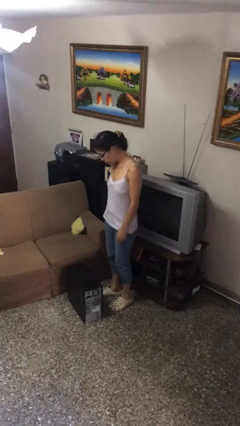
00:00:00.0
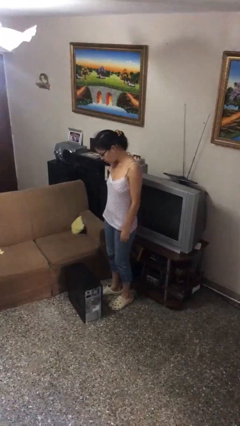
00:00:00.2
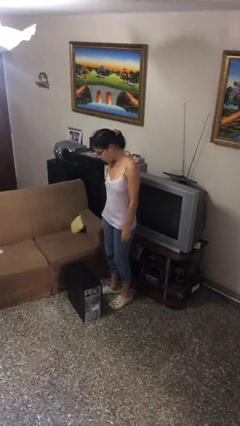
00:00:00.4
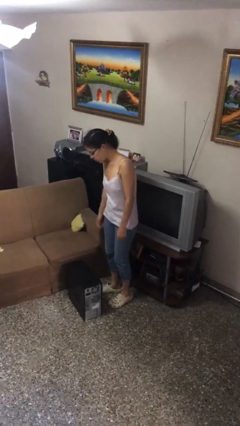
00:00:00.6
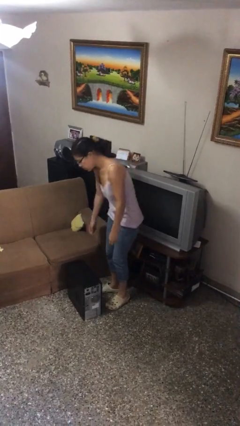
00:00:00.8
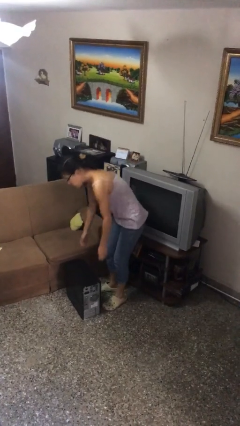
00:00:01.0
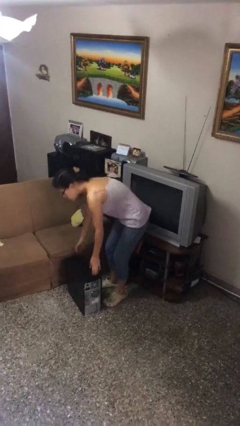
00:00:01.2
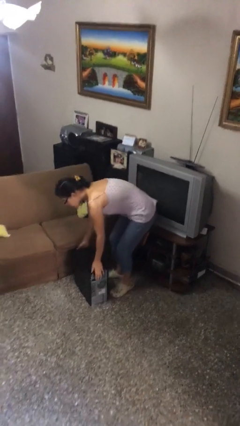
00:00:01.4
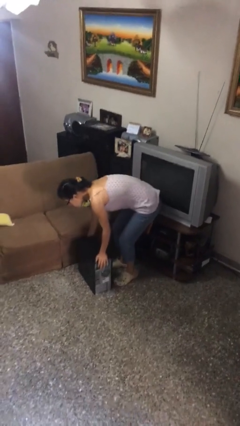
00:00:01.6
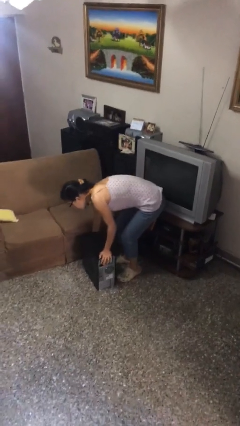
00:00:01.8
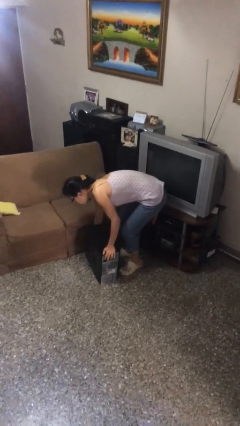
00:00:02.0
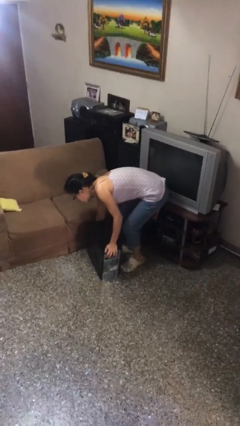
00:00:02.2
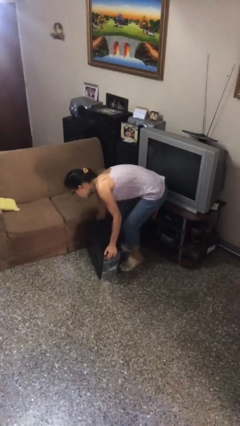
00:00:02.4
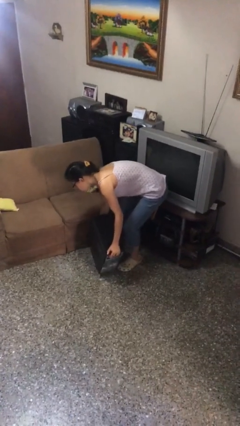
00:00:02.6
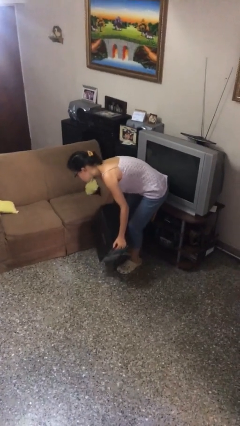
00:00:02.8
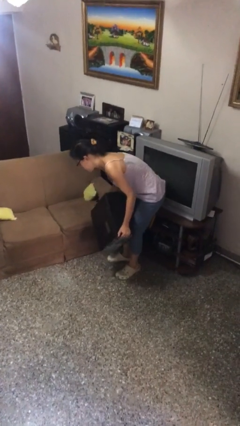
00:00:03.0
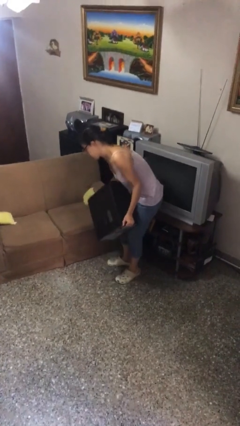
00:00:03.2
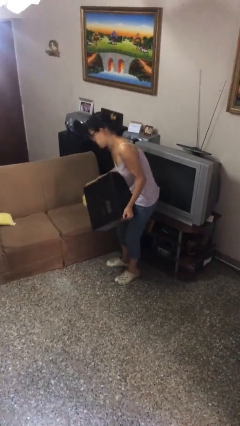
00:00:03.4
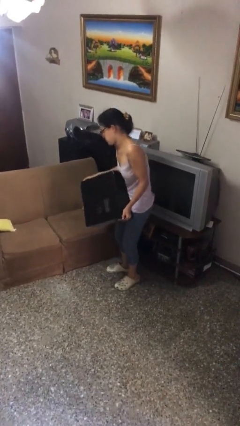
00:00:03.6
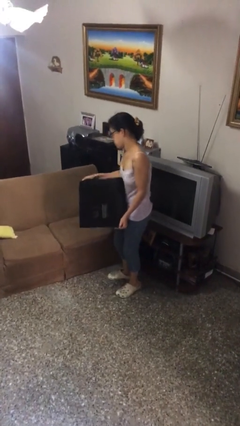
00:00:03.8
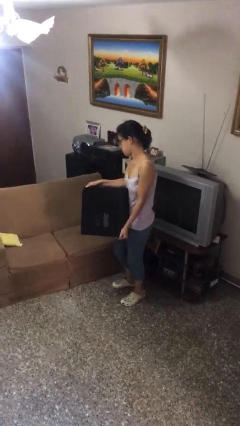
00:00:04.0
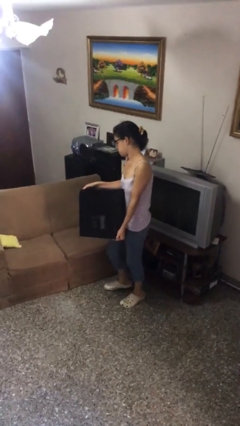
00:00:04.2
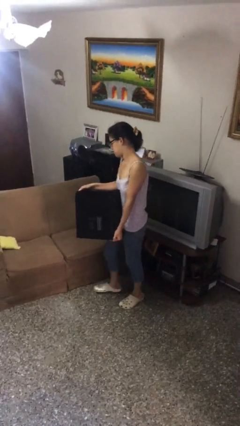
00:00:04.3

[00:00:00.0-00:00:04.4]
person picks up object from floor

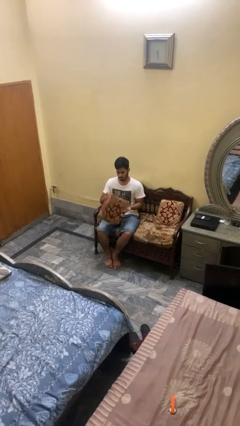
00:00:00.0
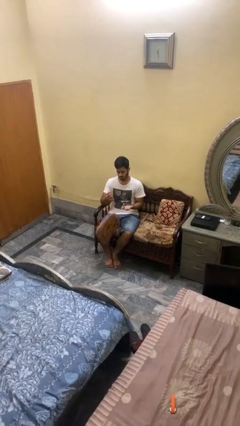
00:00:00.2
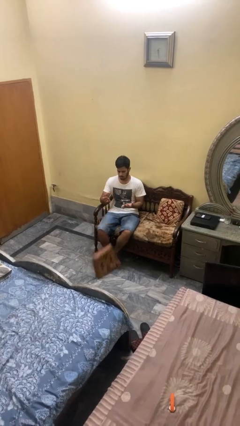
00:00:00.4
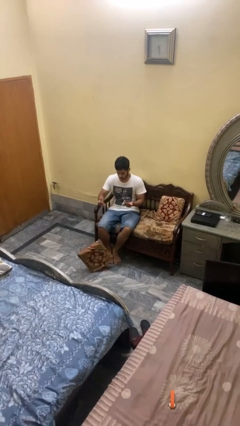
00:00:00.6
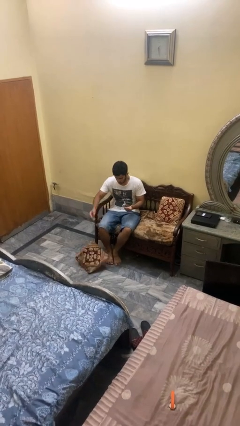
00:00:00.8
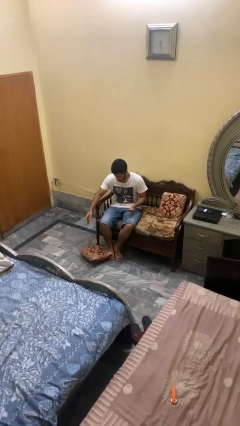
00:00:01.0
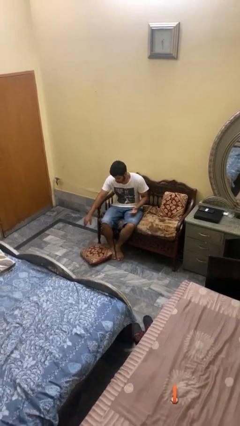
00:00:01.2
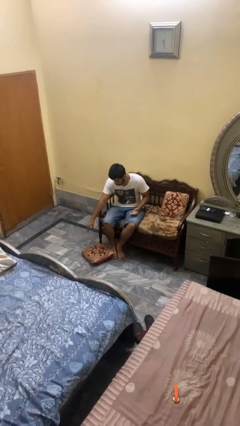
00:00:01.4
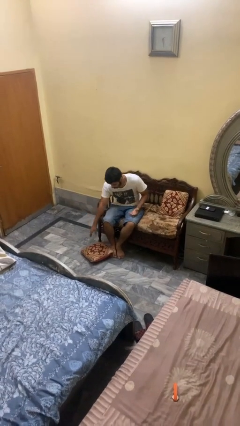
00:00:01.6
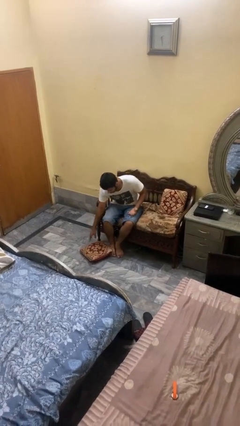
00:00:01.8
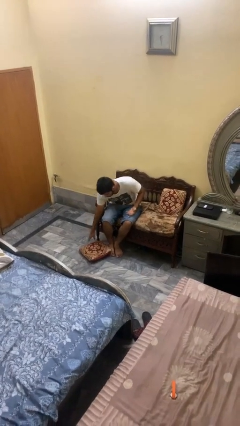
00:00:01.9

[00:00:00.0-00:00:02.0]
person drops object

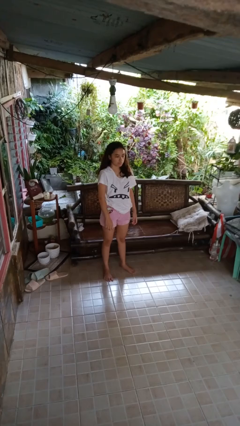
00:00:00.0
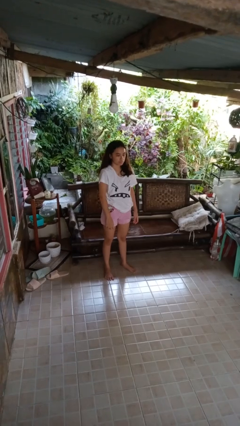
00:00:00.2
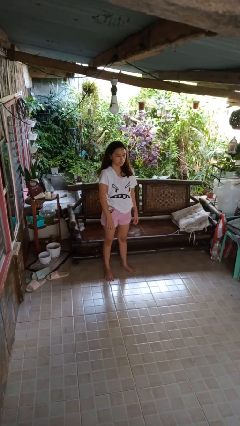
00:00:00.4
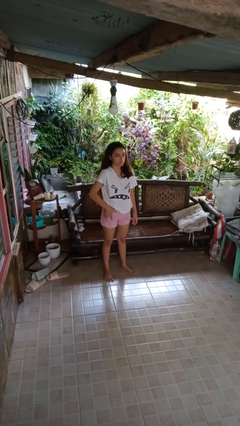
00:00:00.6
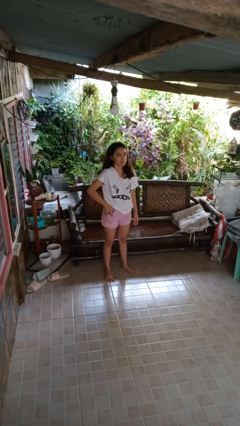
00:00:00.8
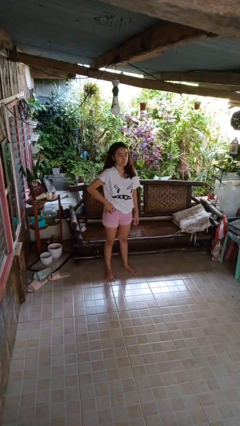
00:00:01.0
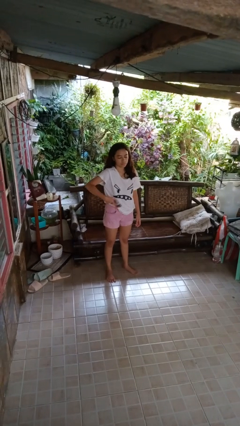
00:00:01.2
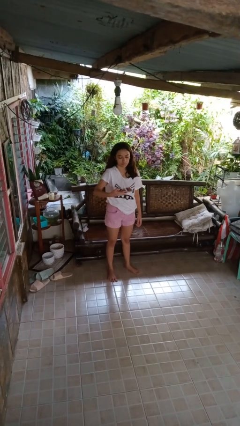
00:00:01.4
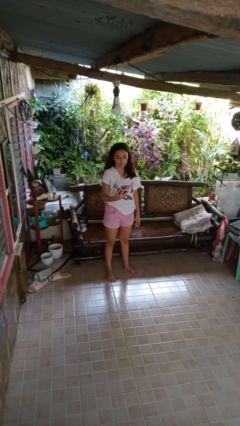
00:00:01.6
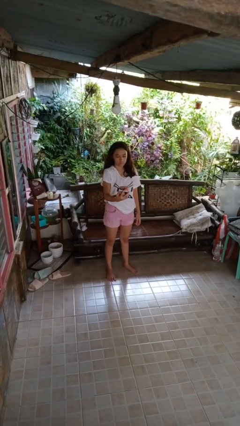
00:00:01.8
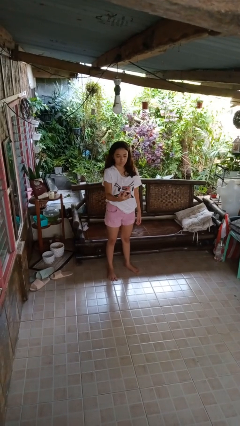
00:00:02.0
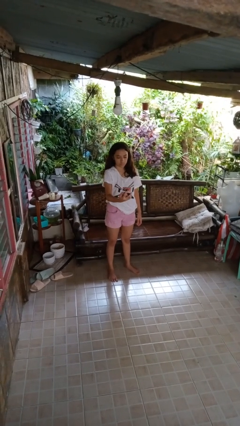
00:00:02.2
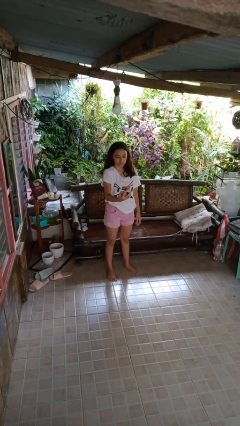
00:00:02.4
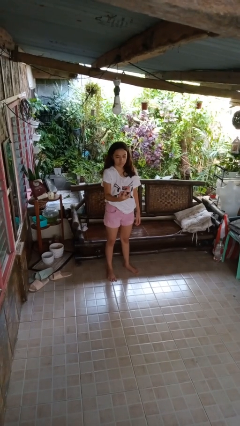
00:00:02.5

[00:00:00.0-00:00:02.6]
person takes phone from pocket

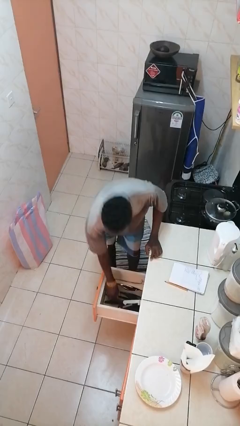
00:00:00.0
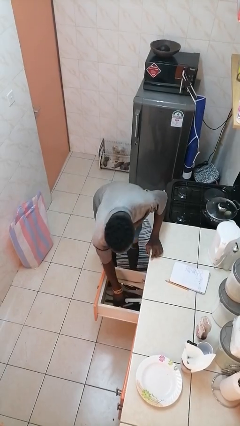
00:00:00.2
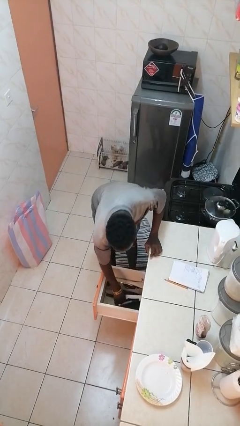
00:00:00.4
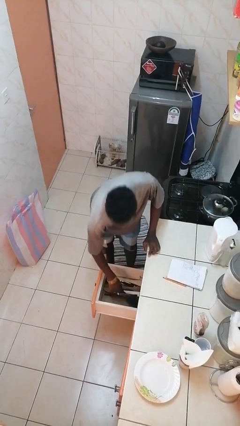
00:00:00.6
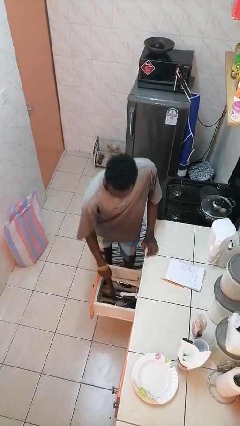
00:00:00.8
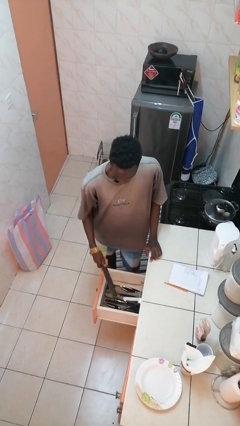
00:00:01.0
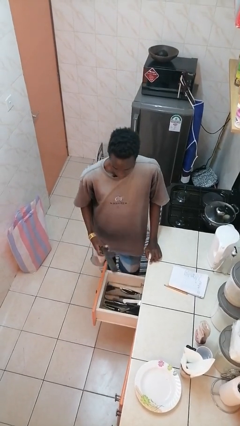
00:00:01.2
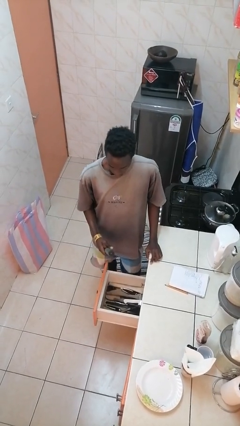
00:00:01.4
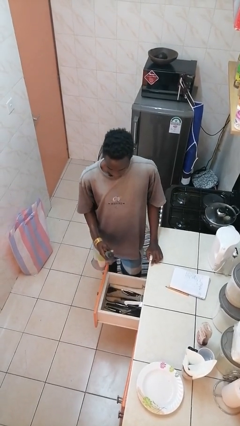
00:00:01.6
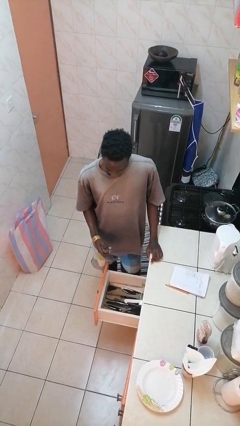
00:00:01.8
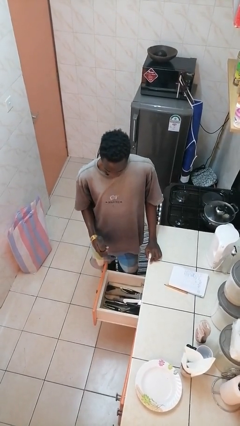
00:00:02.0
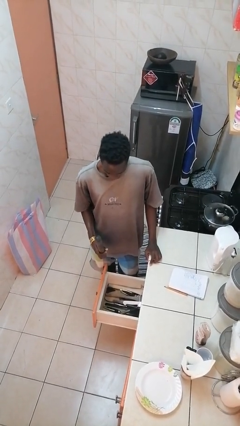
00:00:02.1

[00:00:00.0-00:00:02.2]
person takes object from kitchen drawer

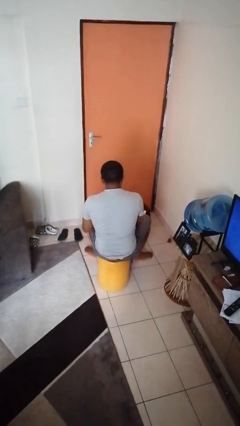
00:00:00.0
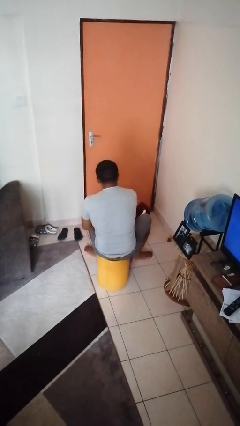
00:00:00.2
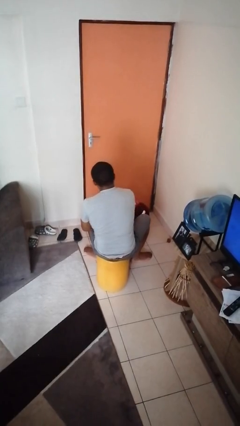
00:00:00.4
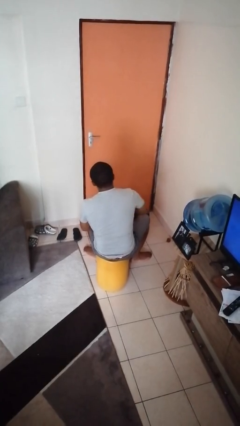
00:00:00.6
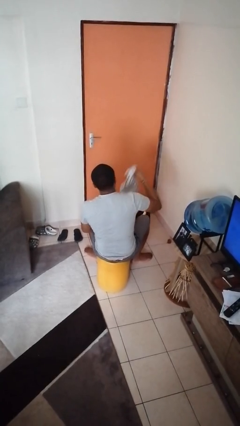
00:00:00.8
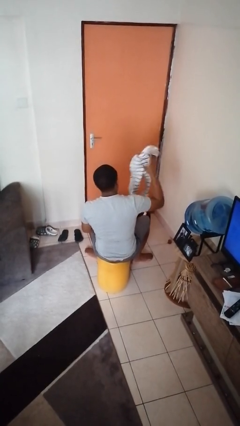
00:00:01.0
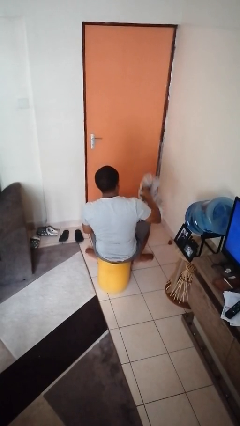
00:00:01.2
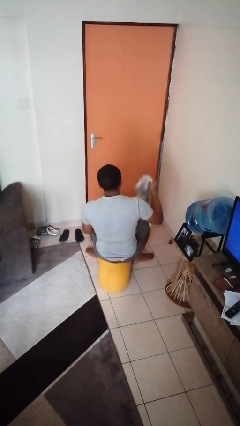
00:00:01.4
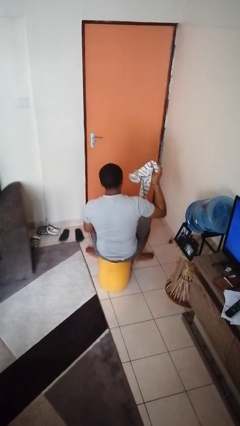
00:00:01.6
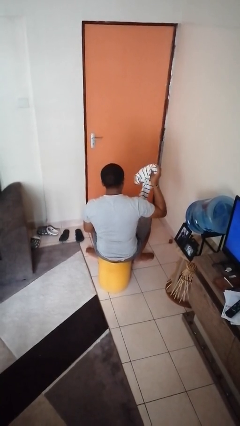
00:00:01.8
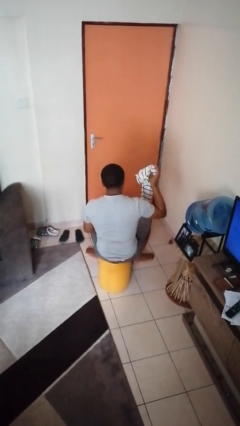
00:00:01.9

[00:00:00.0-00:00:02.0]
person takes object from basket

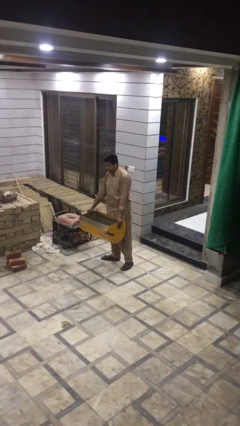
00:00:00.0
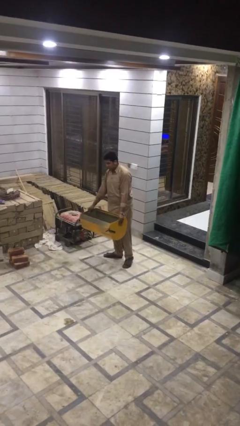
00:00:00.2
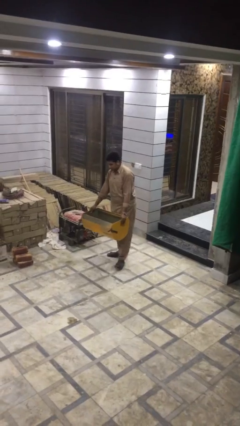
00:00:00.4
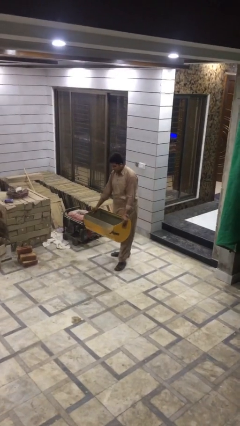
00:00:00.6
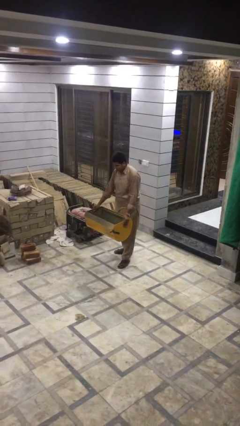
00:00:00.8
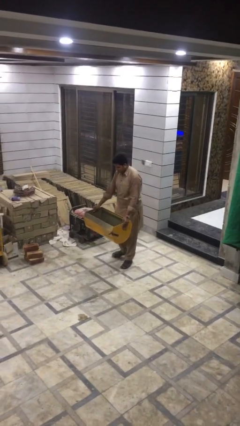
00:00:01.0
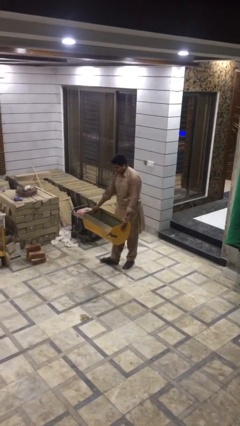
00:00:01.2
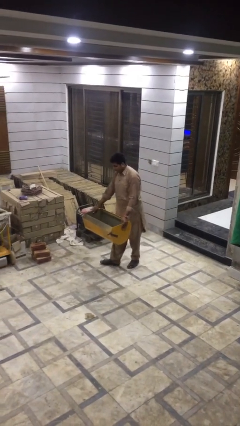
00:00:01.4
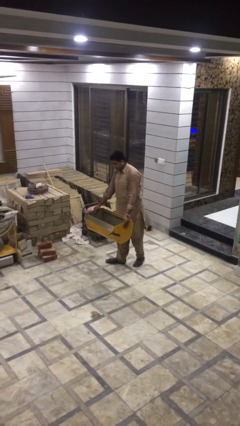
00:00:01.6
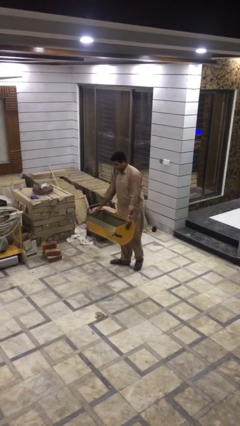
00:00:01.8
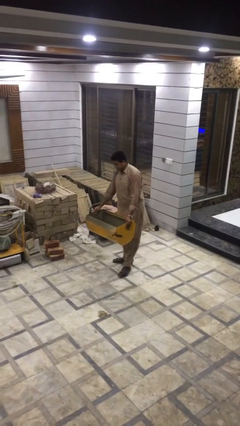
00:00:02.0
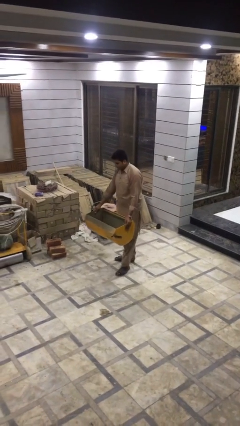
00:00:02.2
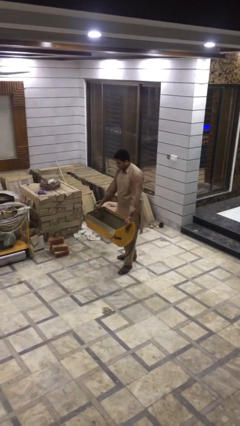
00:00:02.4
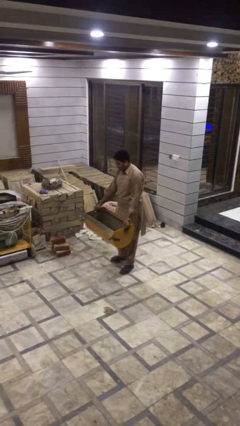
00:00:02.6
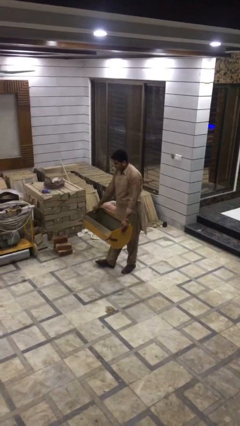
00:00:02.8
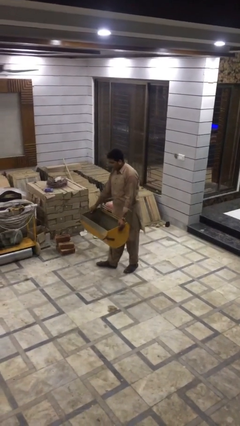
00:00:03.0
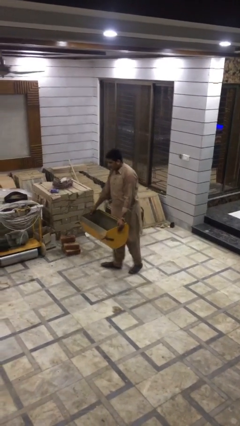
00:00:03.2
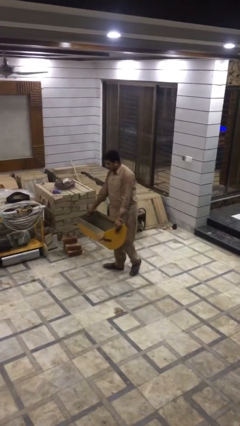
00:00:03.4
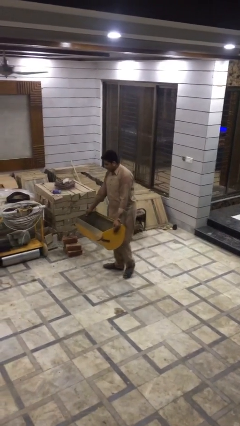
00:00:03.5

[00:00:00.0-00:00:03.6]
person carries heavy object

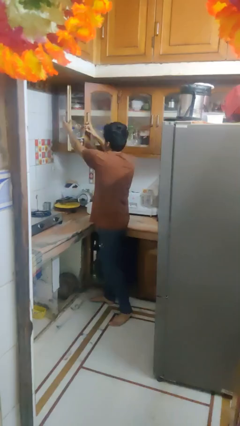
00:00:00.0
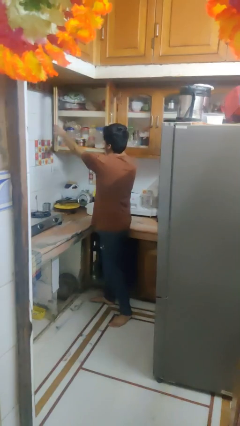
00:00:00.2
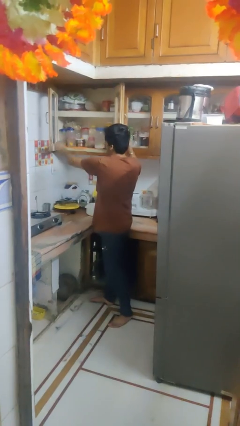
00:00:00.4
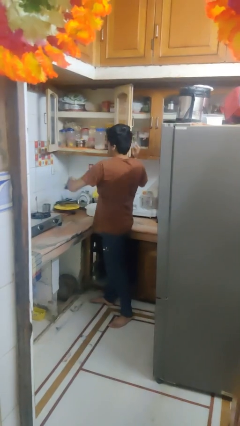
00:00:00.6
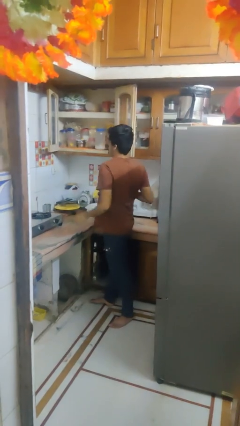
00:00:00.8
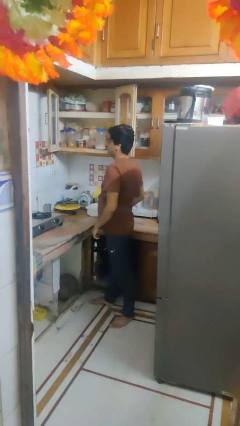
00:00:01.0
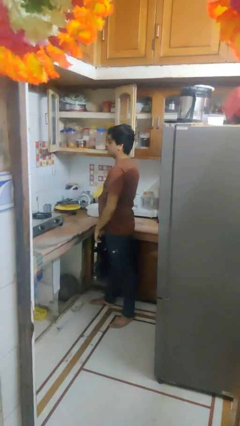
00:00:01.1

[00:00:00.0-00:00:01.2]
person opens cabinet
